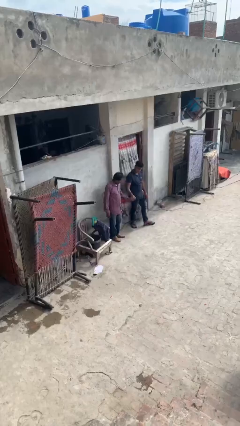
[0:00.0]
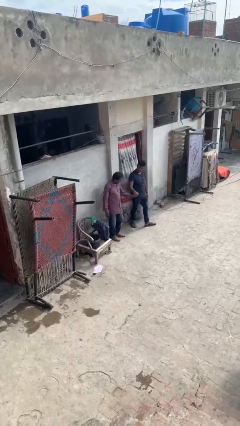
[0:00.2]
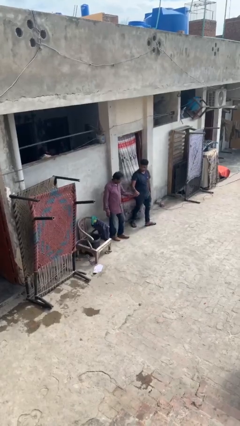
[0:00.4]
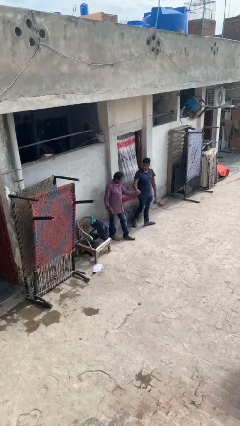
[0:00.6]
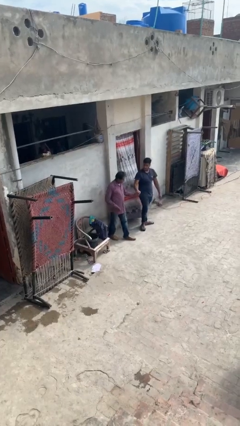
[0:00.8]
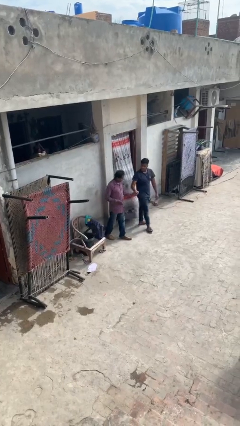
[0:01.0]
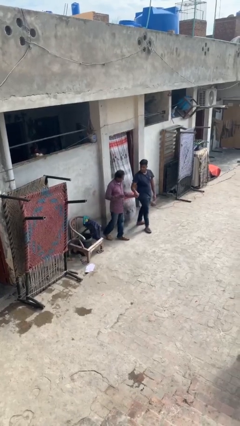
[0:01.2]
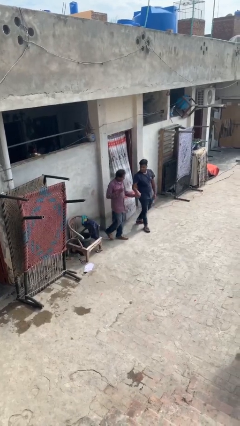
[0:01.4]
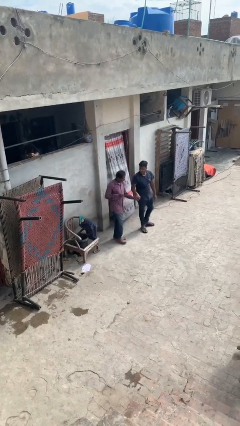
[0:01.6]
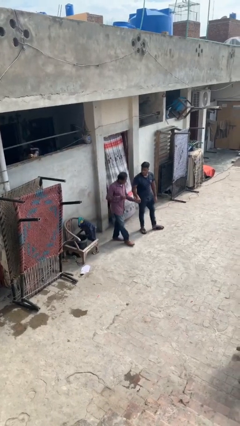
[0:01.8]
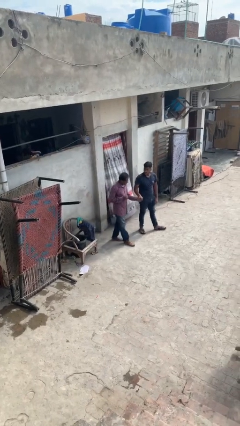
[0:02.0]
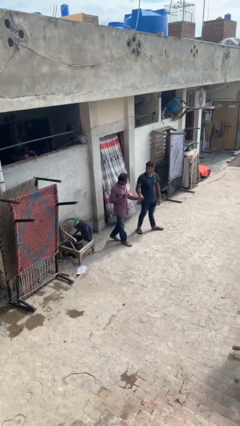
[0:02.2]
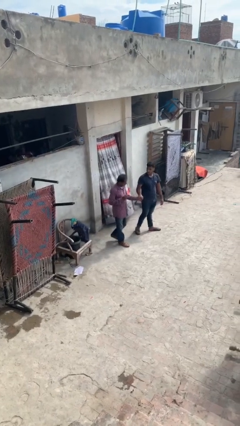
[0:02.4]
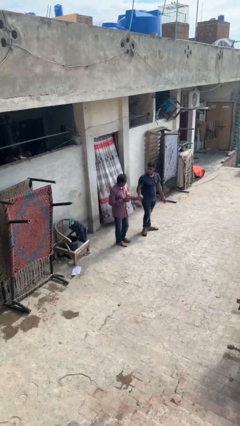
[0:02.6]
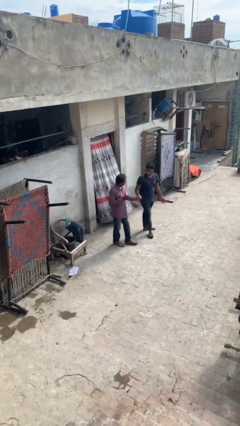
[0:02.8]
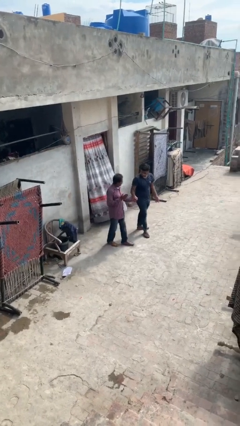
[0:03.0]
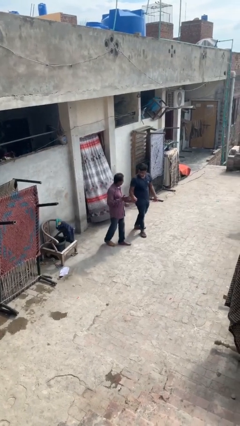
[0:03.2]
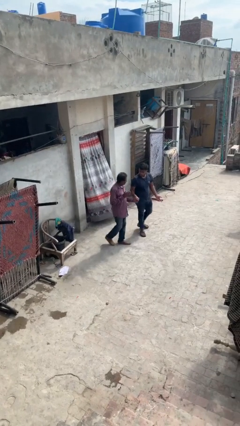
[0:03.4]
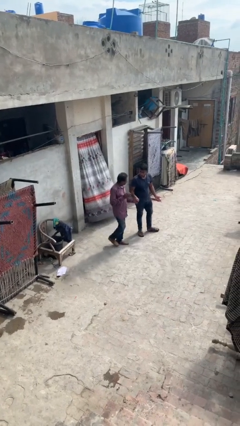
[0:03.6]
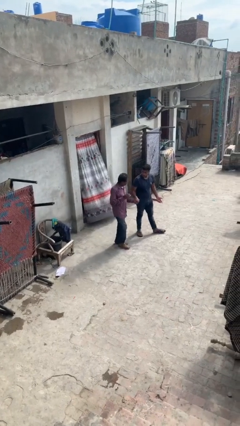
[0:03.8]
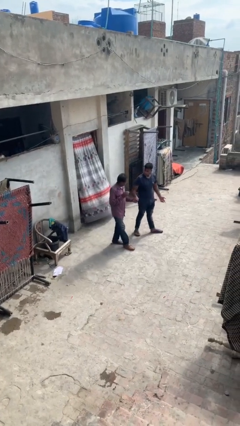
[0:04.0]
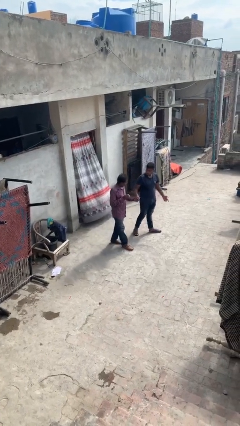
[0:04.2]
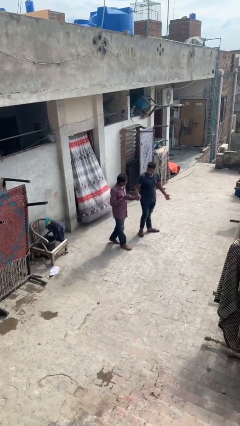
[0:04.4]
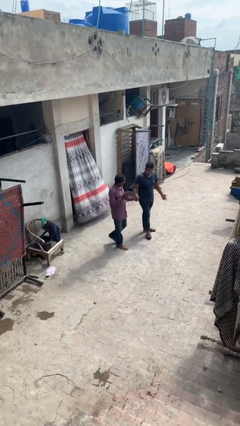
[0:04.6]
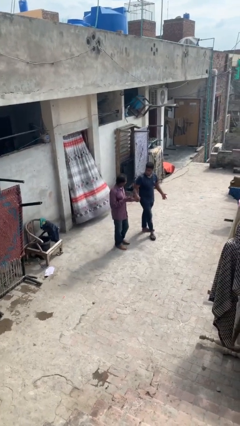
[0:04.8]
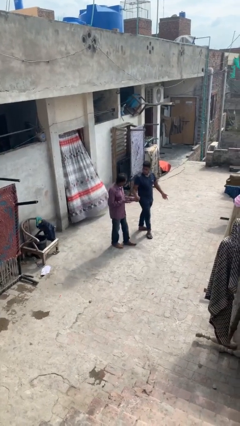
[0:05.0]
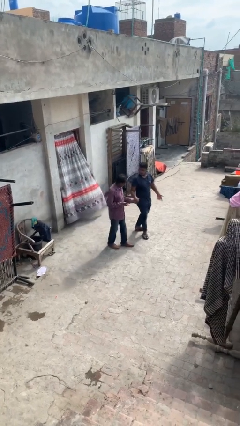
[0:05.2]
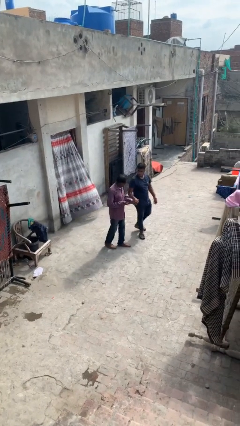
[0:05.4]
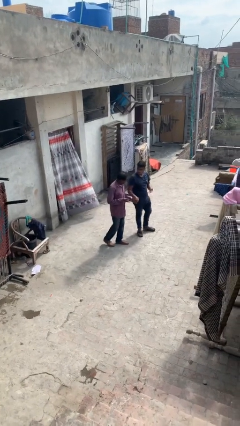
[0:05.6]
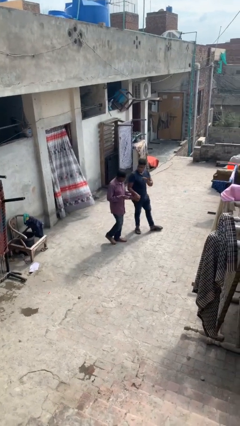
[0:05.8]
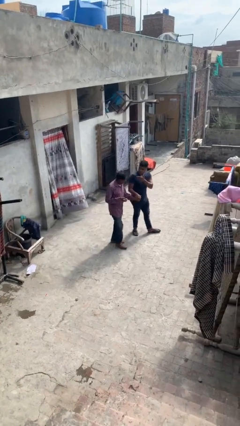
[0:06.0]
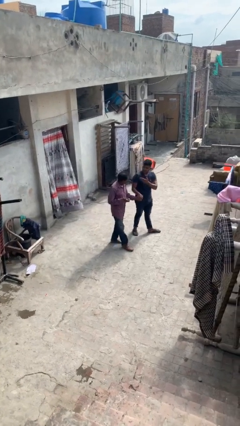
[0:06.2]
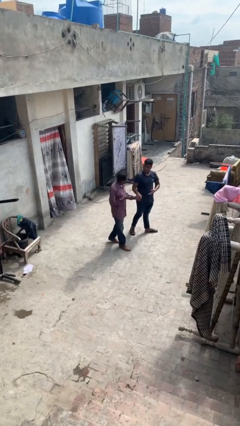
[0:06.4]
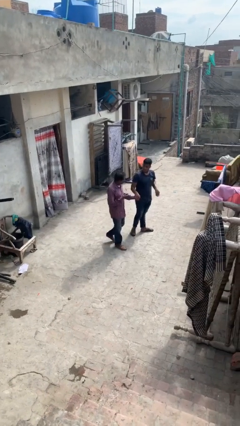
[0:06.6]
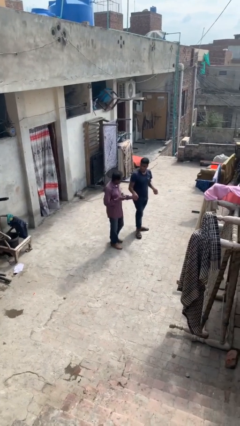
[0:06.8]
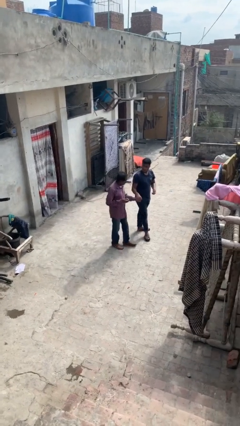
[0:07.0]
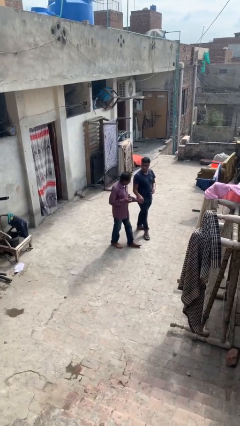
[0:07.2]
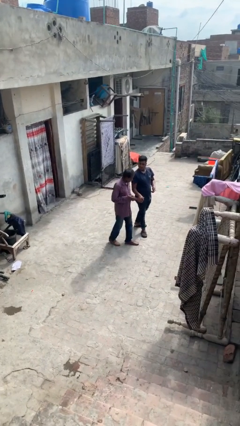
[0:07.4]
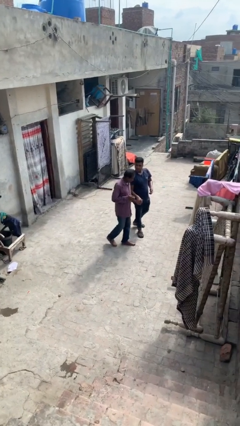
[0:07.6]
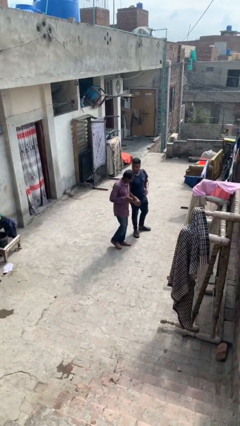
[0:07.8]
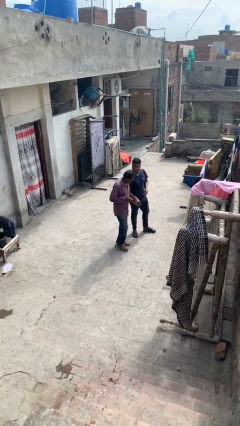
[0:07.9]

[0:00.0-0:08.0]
person holds hand

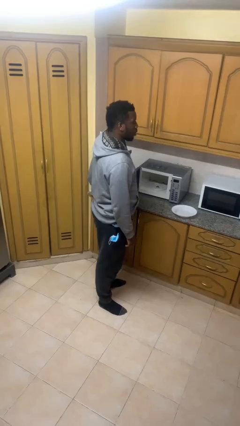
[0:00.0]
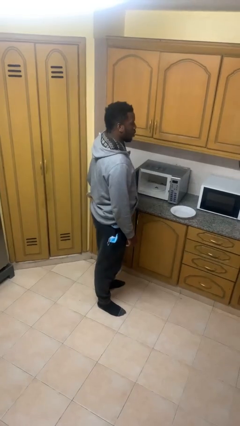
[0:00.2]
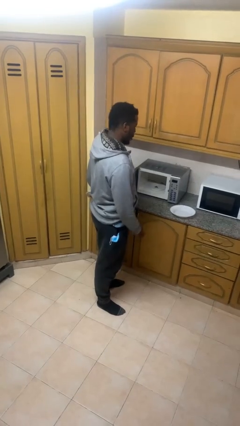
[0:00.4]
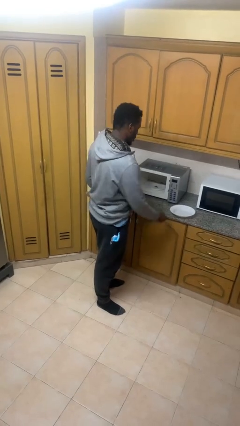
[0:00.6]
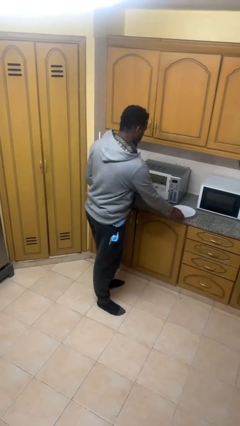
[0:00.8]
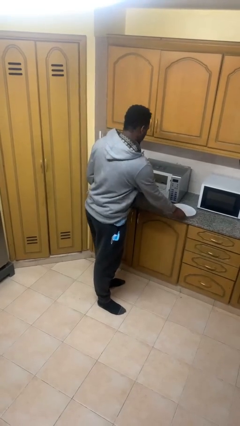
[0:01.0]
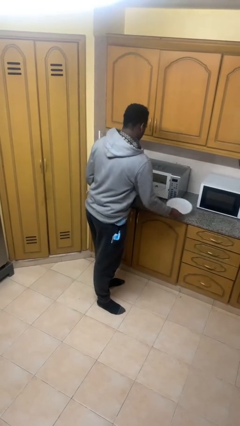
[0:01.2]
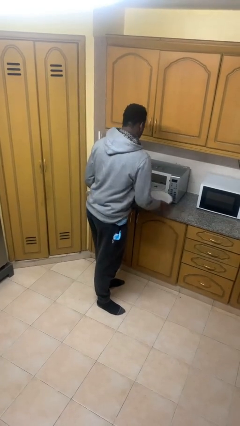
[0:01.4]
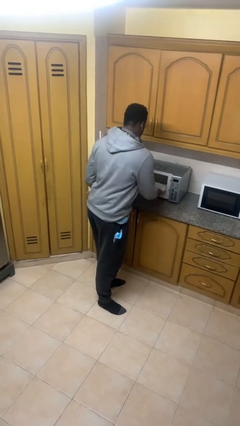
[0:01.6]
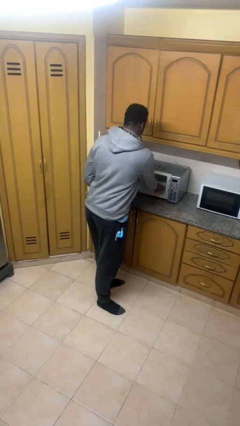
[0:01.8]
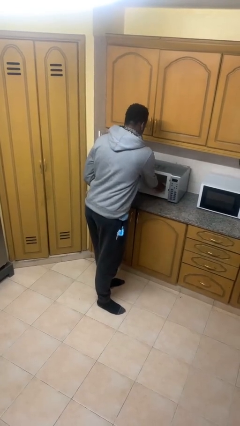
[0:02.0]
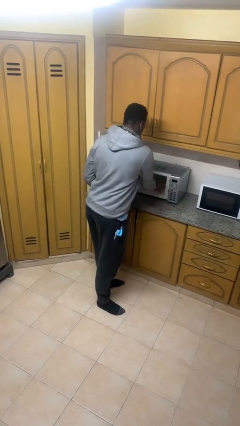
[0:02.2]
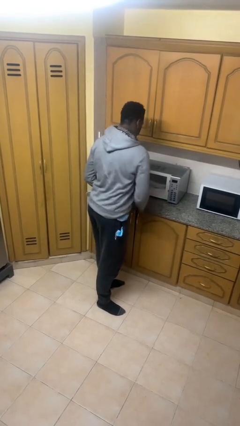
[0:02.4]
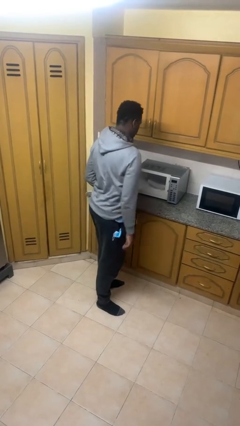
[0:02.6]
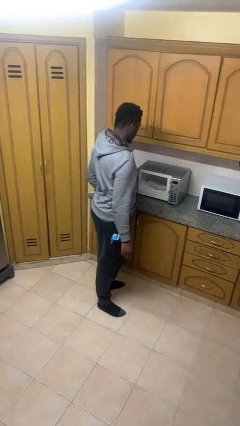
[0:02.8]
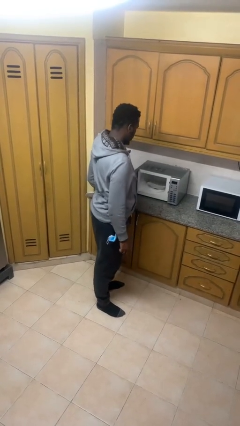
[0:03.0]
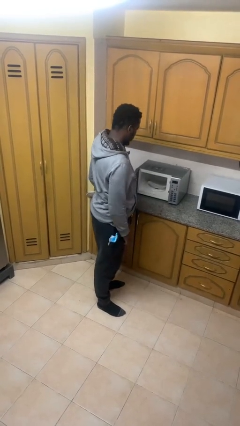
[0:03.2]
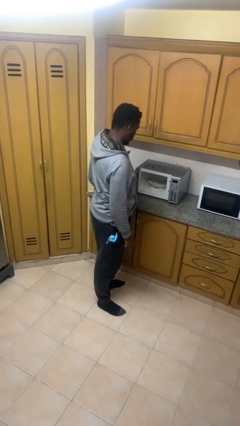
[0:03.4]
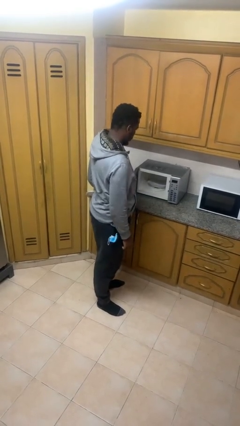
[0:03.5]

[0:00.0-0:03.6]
person puts object into microwave

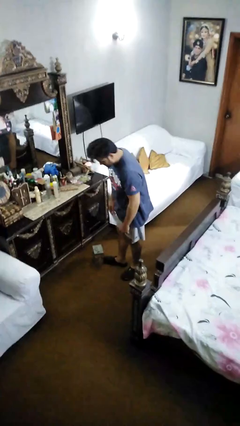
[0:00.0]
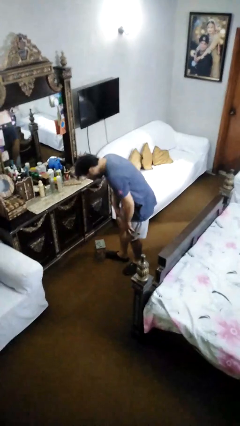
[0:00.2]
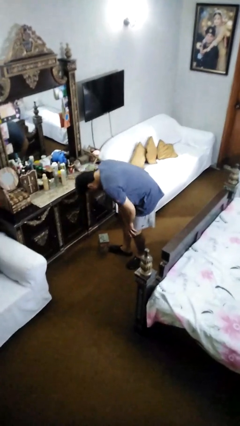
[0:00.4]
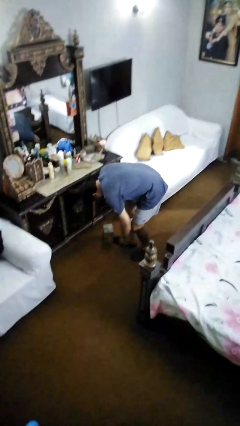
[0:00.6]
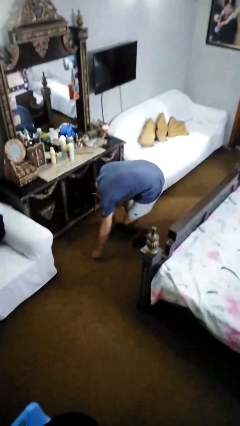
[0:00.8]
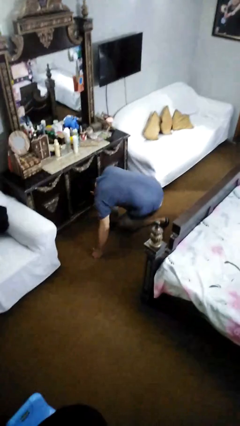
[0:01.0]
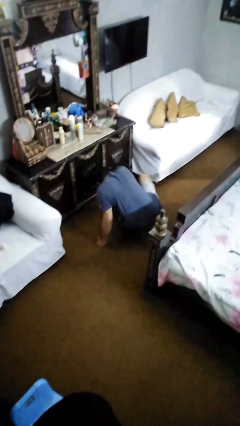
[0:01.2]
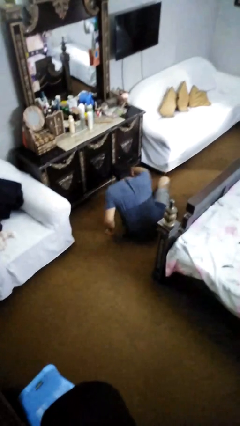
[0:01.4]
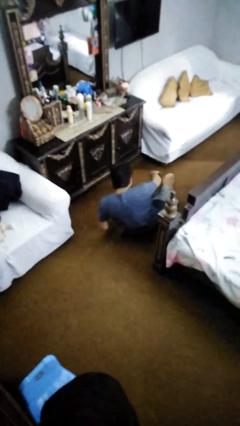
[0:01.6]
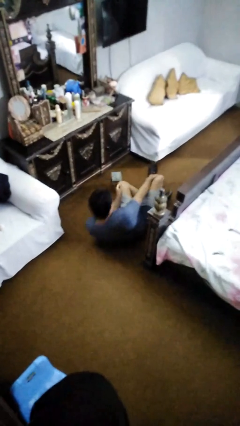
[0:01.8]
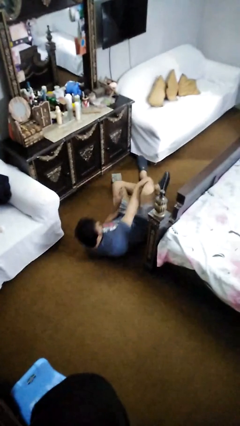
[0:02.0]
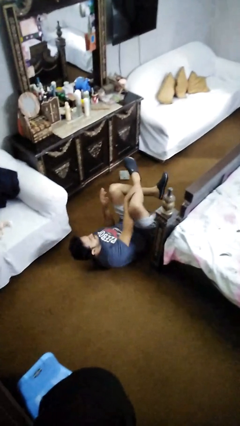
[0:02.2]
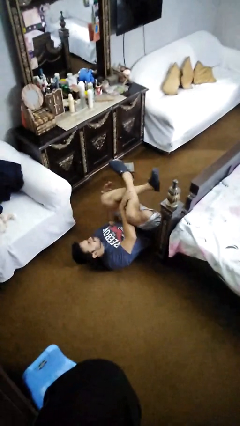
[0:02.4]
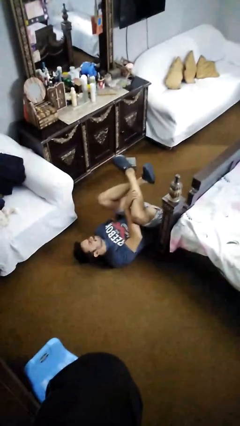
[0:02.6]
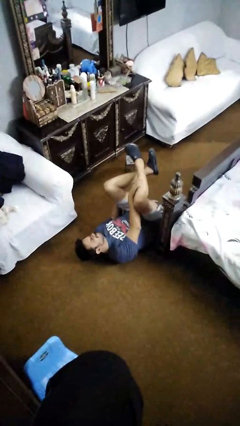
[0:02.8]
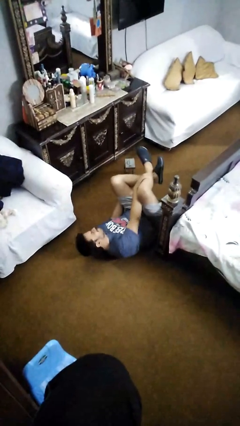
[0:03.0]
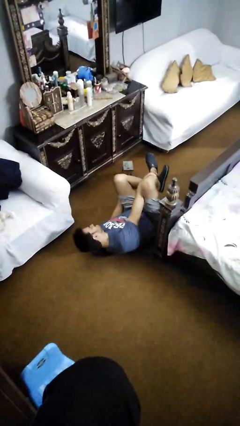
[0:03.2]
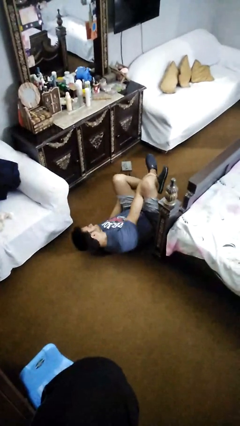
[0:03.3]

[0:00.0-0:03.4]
person lies down on floor

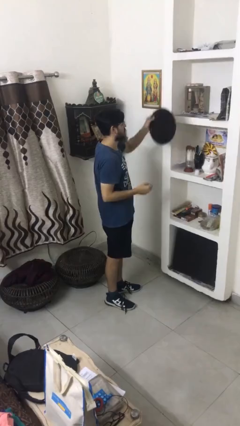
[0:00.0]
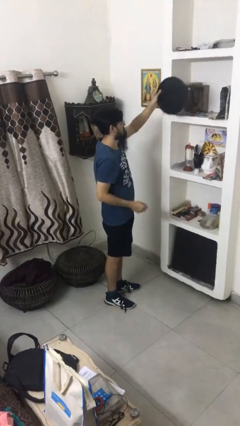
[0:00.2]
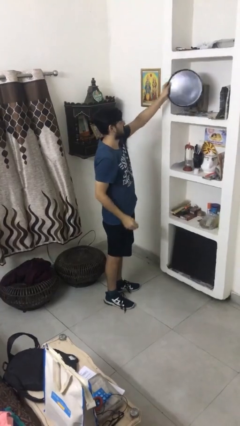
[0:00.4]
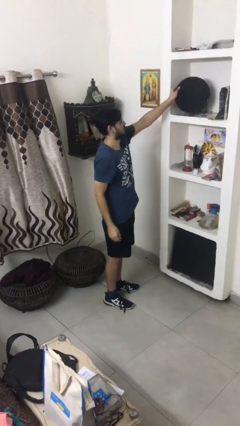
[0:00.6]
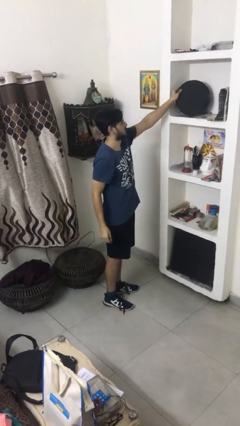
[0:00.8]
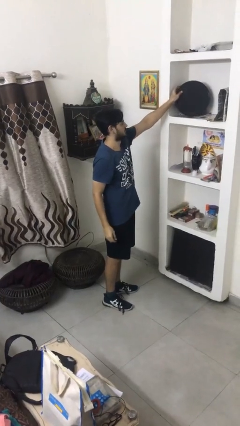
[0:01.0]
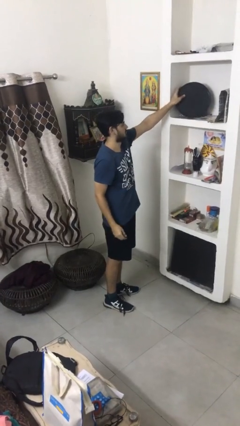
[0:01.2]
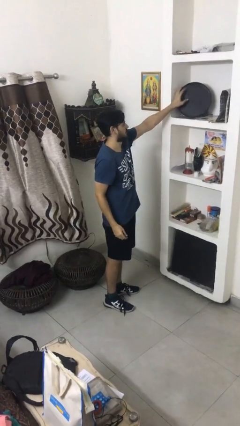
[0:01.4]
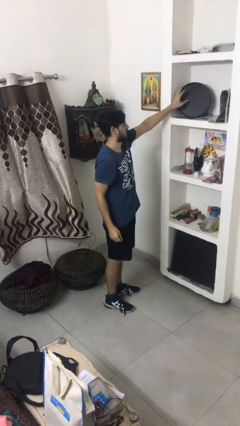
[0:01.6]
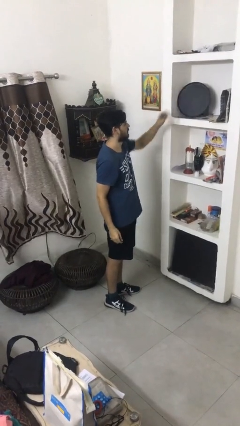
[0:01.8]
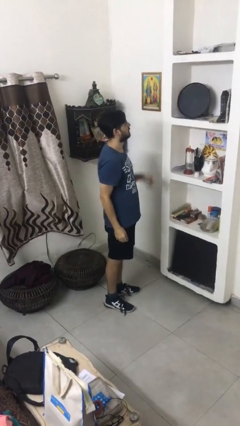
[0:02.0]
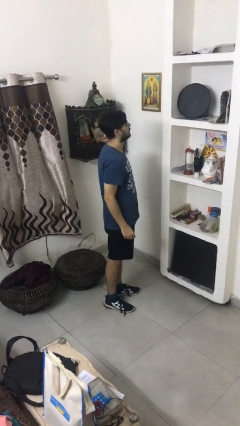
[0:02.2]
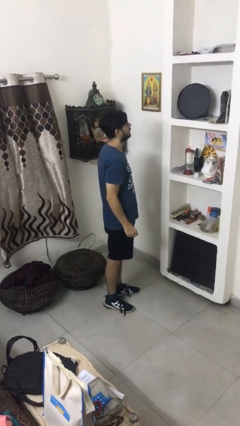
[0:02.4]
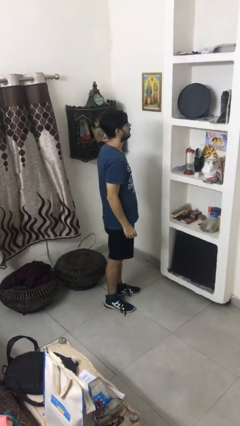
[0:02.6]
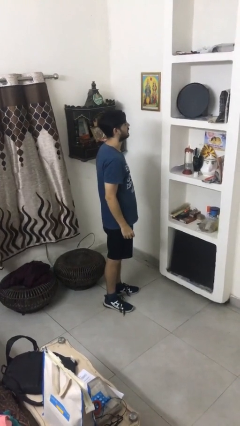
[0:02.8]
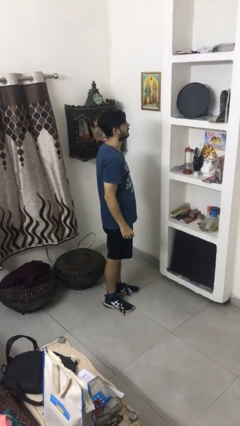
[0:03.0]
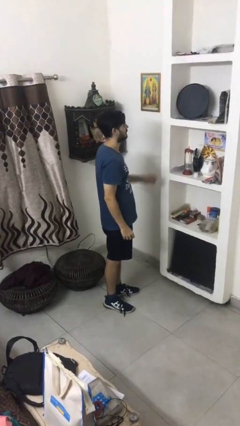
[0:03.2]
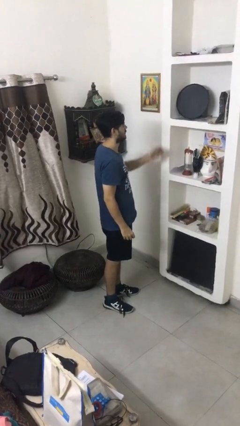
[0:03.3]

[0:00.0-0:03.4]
person puts down object on shelf
